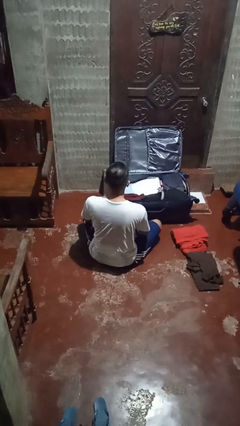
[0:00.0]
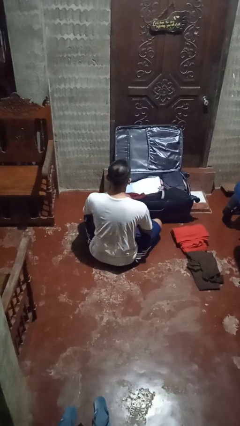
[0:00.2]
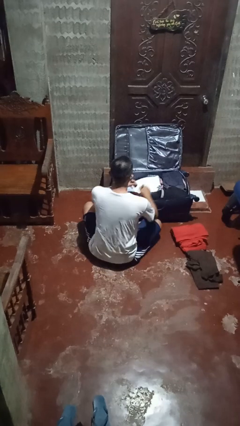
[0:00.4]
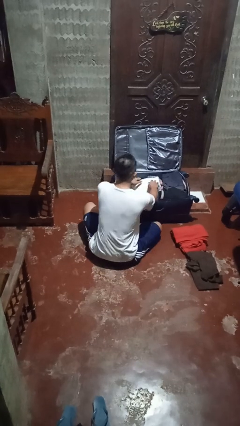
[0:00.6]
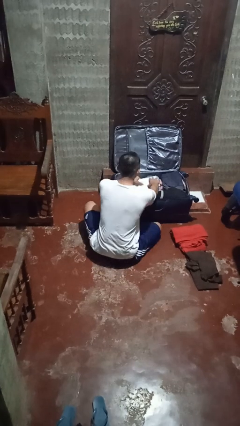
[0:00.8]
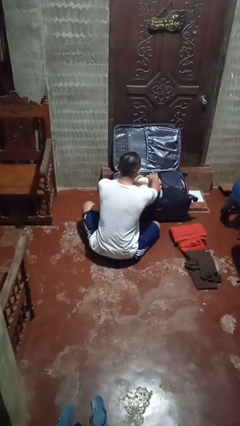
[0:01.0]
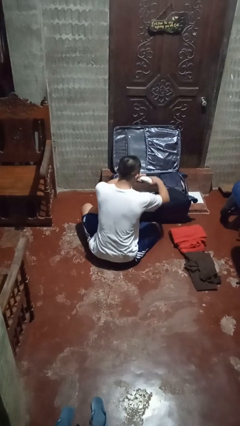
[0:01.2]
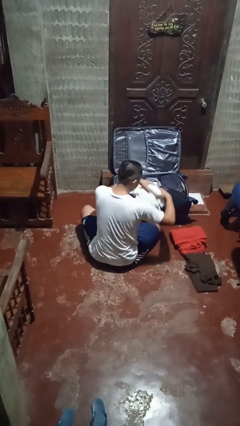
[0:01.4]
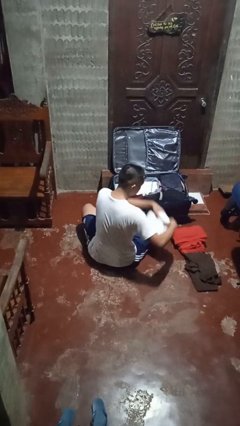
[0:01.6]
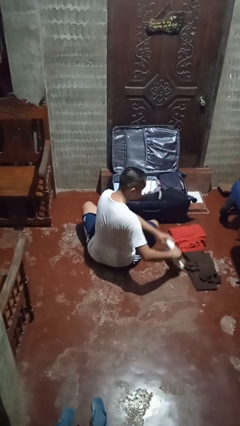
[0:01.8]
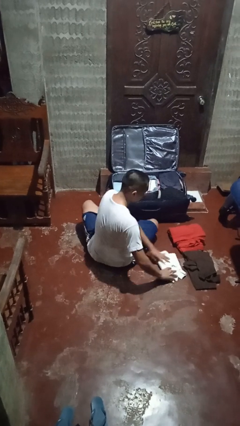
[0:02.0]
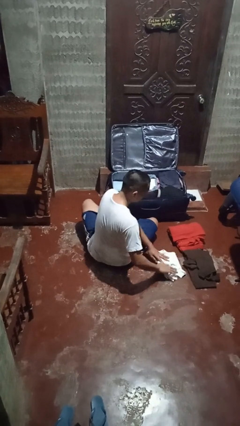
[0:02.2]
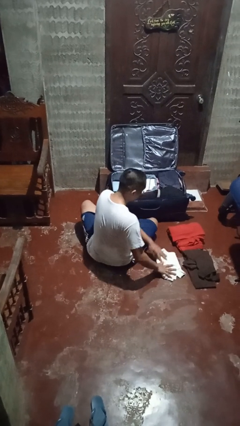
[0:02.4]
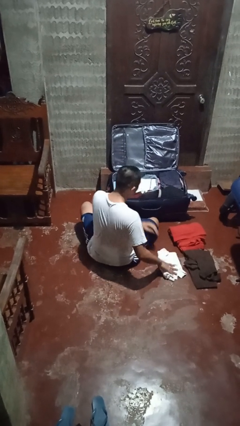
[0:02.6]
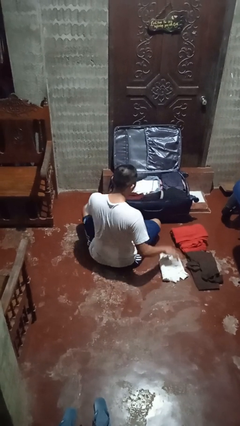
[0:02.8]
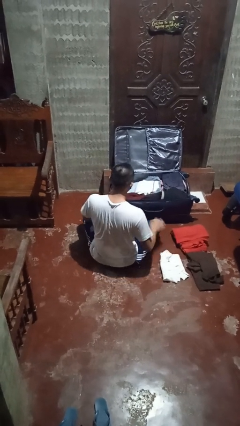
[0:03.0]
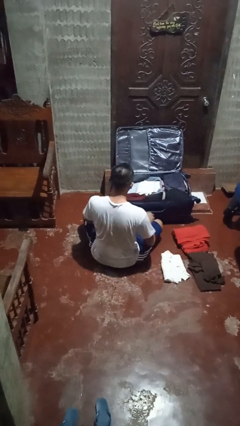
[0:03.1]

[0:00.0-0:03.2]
person unloads clothes from suitcase

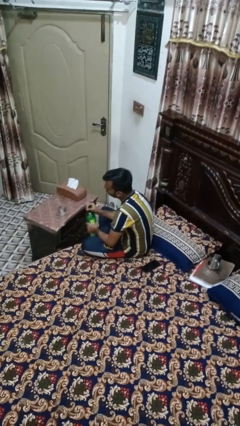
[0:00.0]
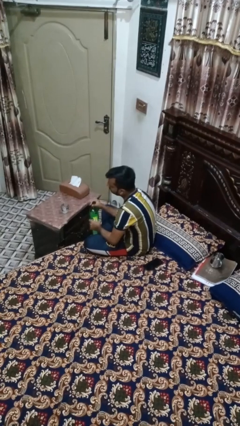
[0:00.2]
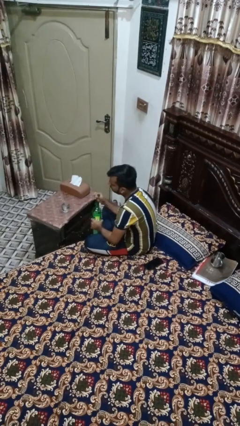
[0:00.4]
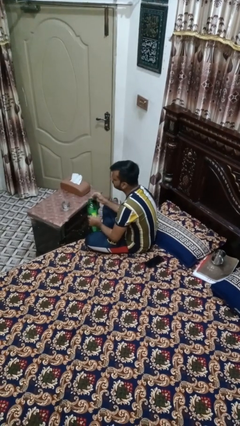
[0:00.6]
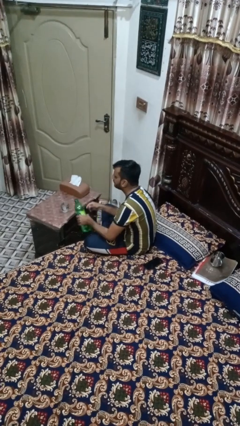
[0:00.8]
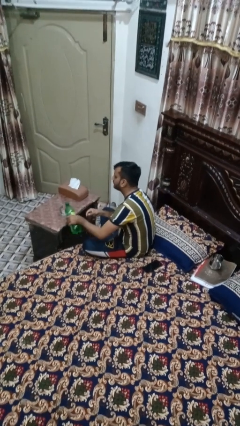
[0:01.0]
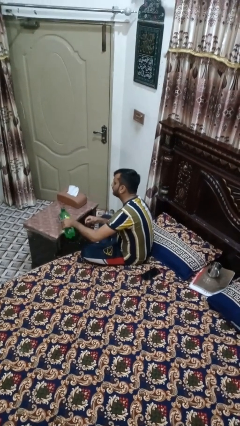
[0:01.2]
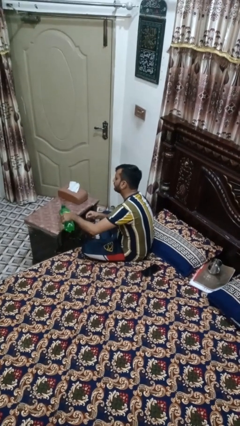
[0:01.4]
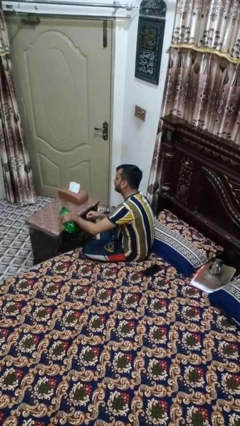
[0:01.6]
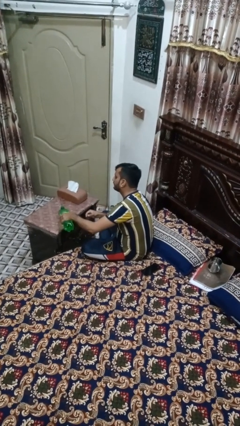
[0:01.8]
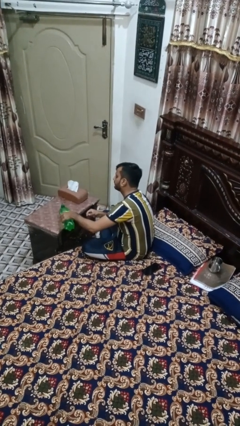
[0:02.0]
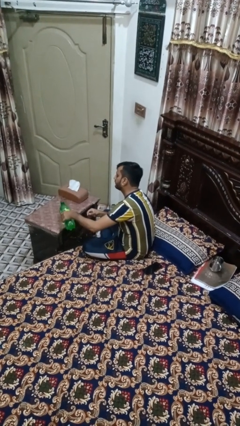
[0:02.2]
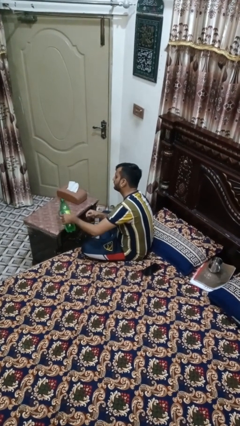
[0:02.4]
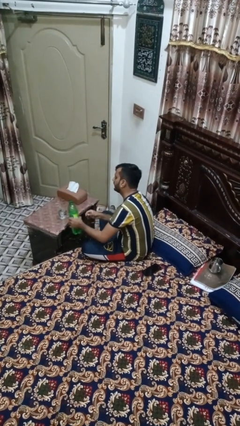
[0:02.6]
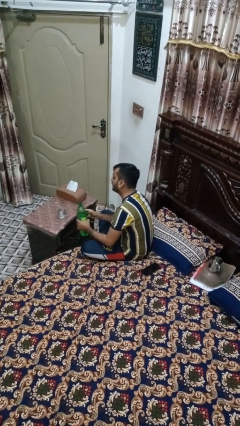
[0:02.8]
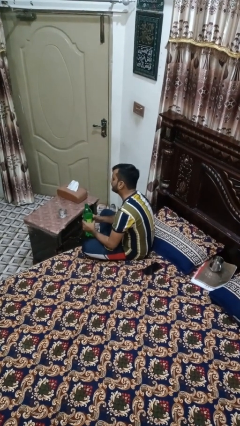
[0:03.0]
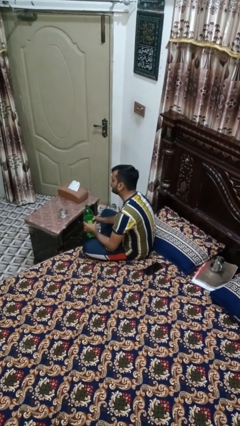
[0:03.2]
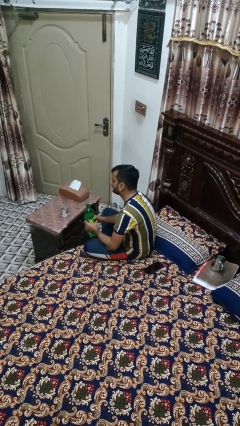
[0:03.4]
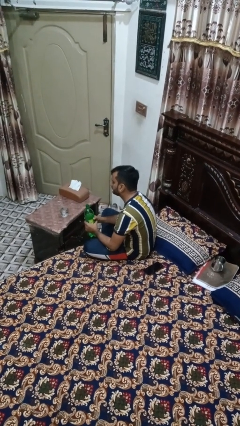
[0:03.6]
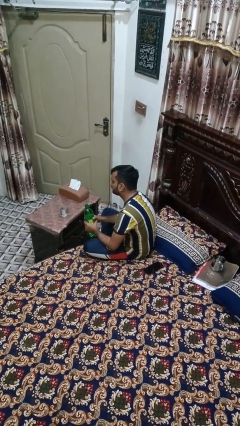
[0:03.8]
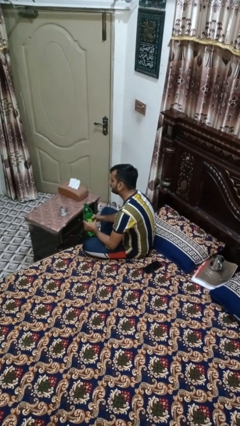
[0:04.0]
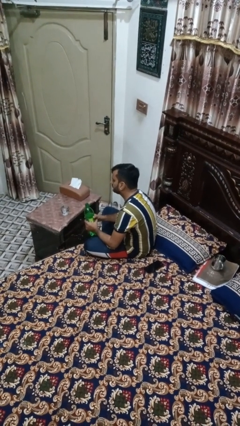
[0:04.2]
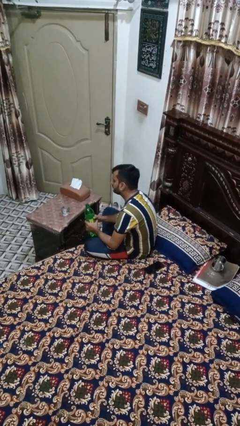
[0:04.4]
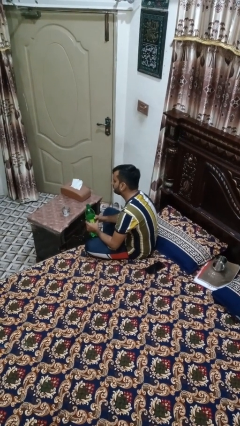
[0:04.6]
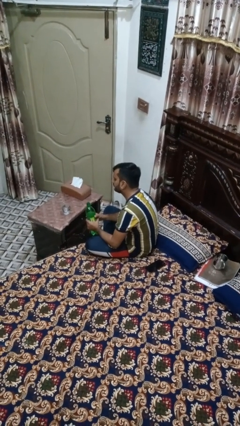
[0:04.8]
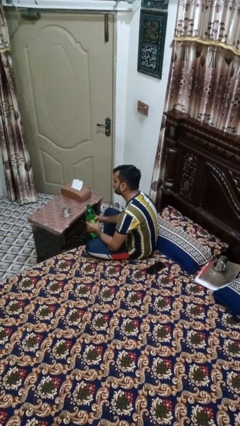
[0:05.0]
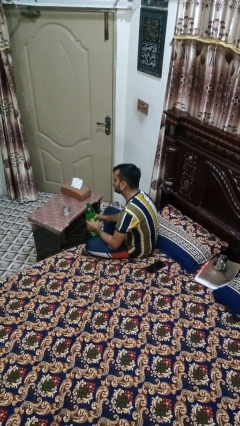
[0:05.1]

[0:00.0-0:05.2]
person pours liquid into cup

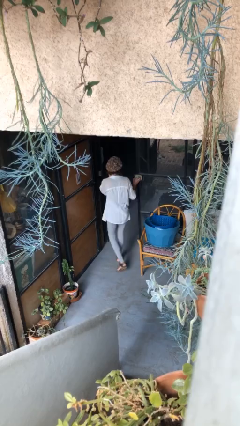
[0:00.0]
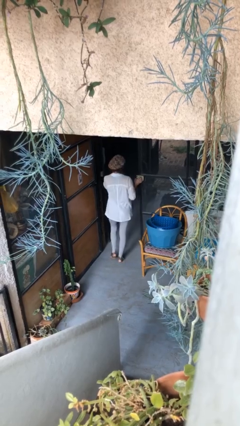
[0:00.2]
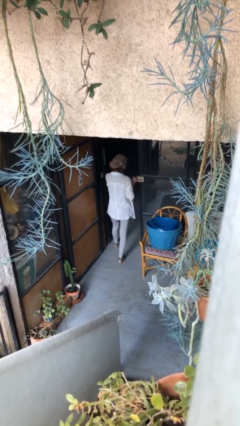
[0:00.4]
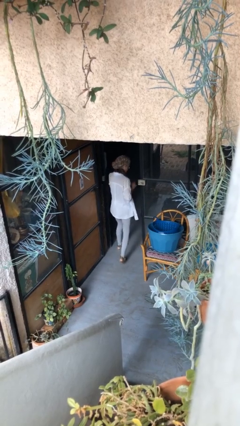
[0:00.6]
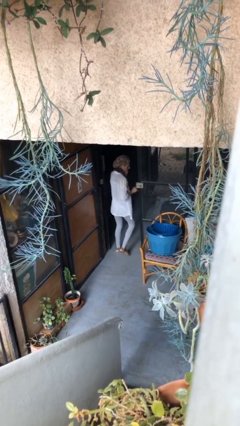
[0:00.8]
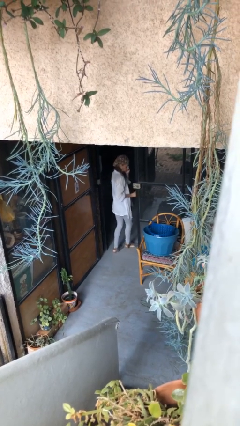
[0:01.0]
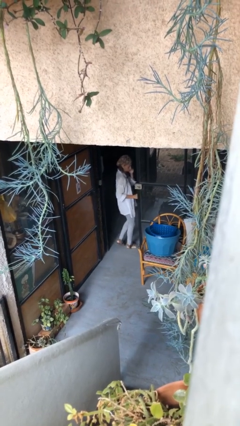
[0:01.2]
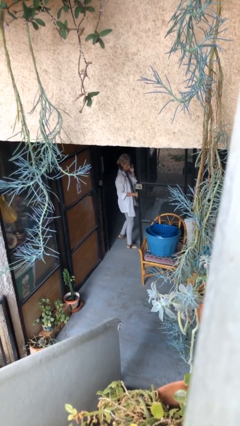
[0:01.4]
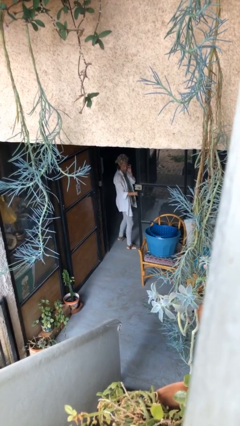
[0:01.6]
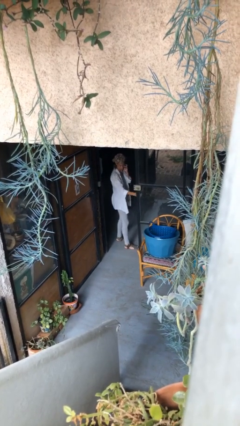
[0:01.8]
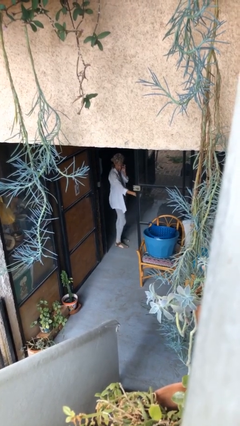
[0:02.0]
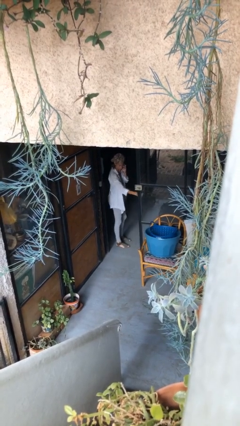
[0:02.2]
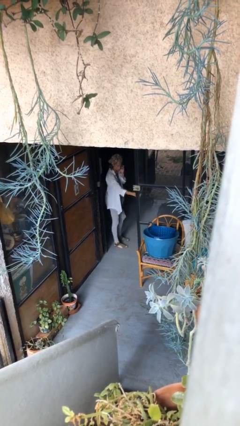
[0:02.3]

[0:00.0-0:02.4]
person exits scene through structure

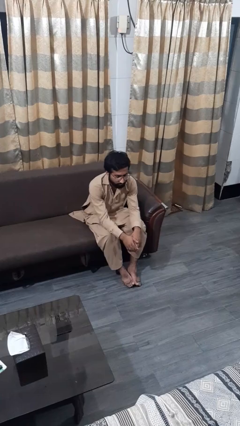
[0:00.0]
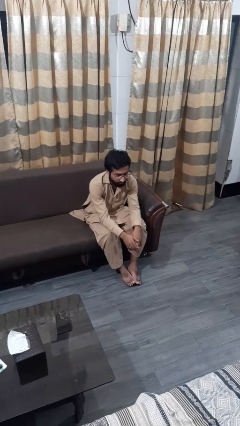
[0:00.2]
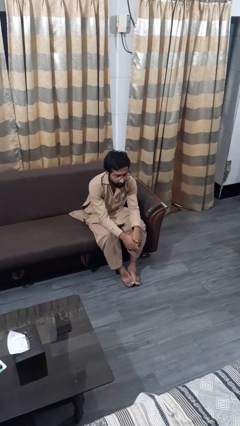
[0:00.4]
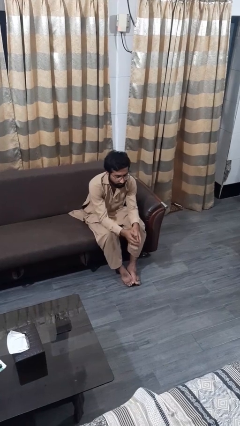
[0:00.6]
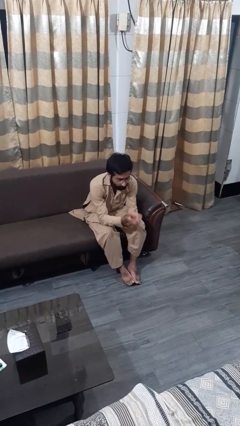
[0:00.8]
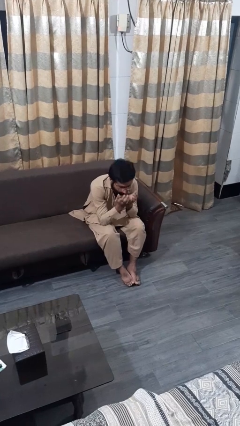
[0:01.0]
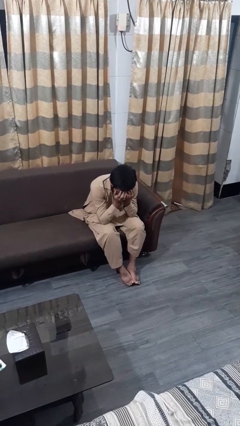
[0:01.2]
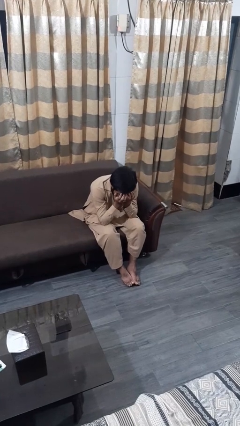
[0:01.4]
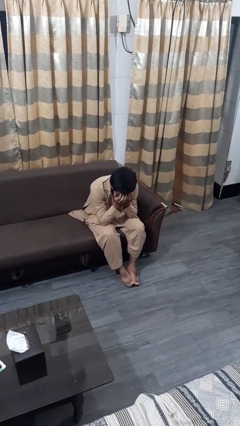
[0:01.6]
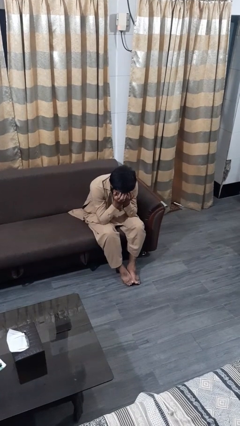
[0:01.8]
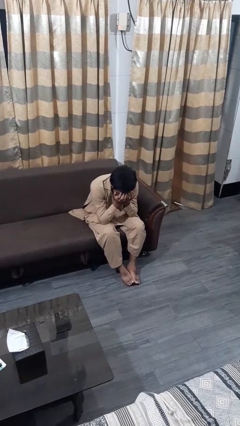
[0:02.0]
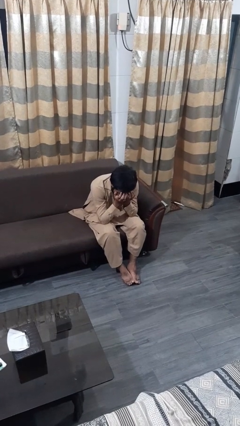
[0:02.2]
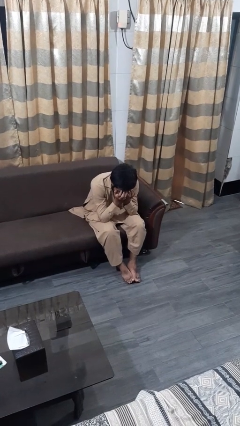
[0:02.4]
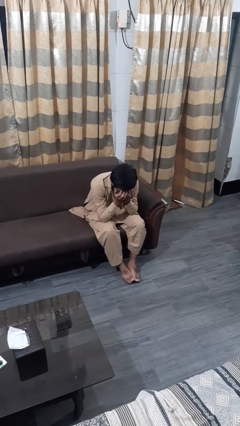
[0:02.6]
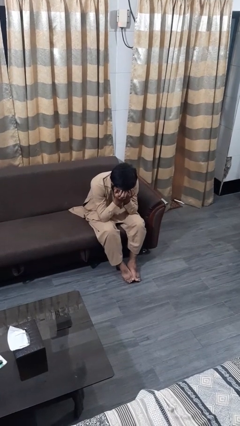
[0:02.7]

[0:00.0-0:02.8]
person covers face with hands

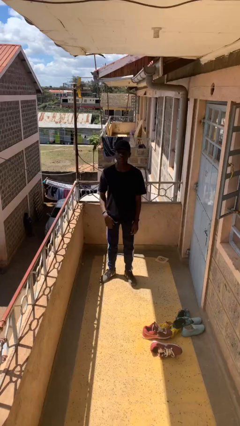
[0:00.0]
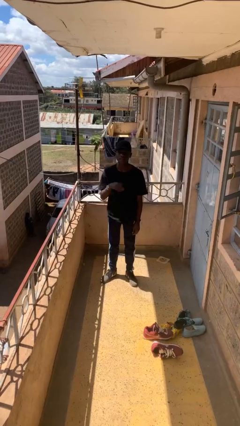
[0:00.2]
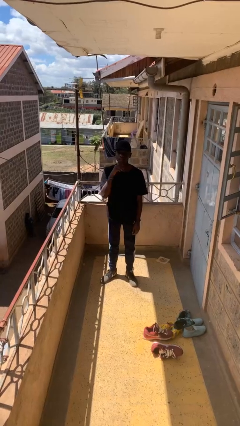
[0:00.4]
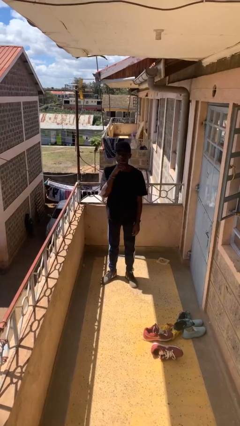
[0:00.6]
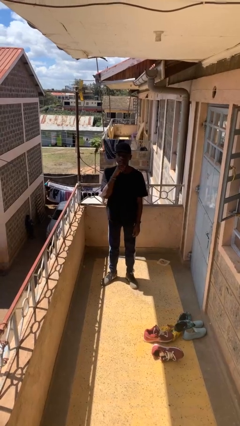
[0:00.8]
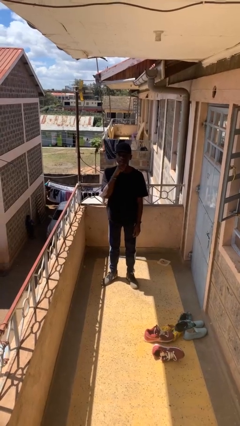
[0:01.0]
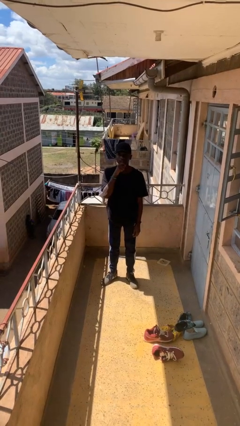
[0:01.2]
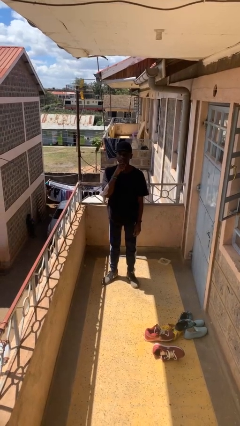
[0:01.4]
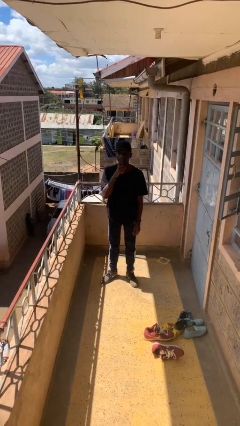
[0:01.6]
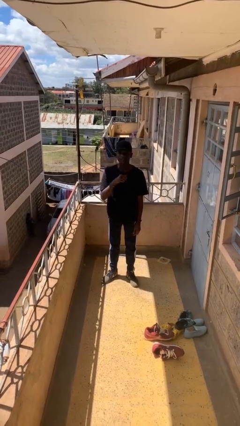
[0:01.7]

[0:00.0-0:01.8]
person strokes chin

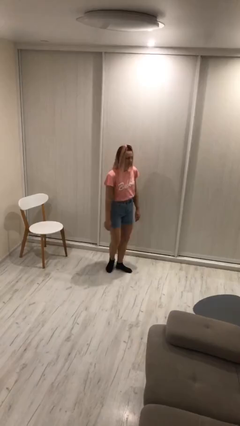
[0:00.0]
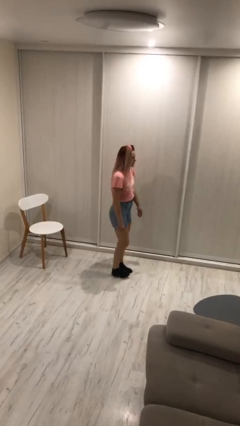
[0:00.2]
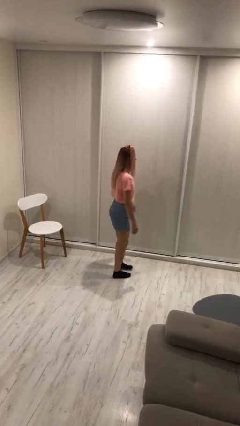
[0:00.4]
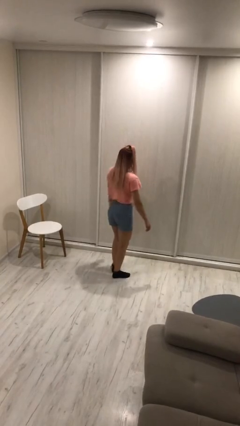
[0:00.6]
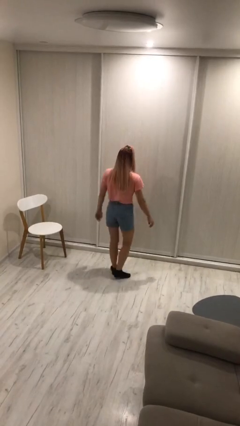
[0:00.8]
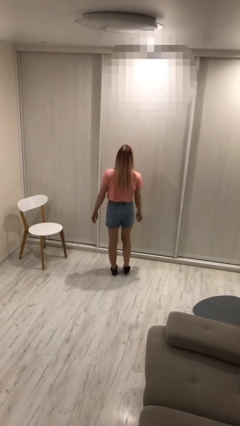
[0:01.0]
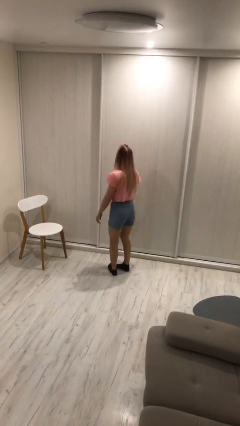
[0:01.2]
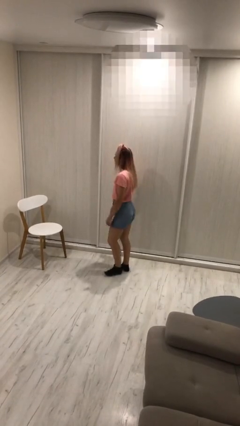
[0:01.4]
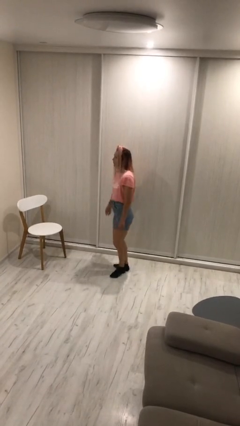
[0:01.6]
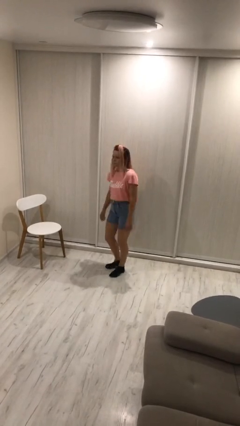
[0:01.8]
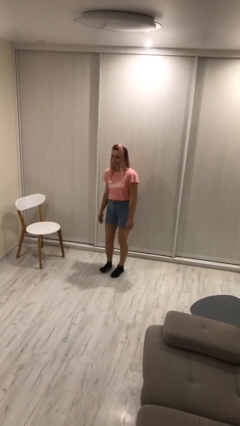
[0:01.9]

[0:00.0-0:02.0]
person twirls

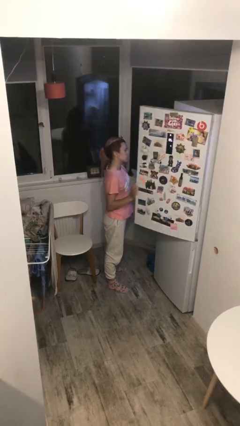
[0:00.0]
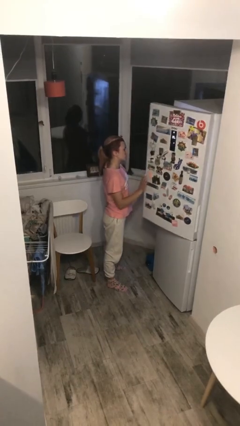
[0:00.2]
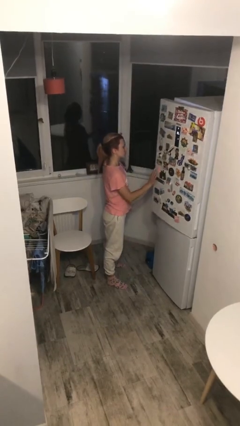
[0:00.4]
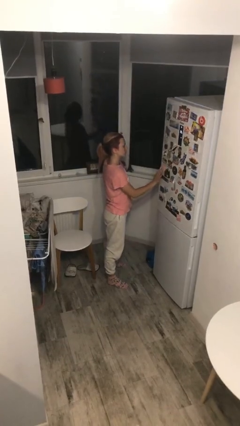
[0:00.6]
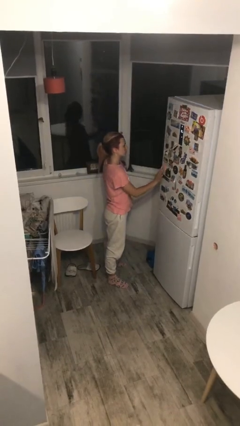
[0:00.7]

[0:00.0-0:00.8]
person closes refrigerator
